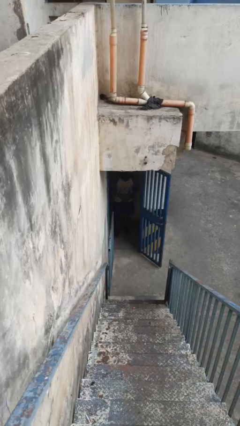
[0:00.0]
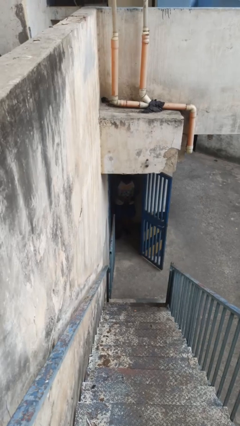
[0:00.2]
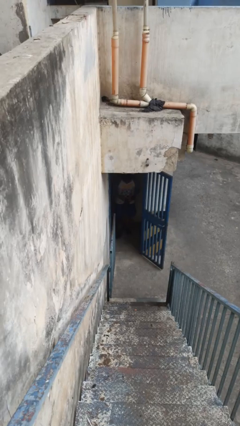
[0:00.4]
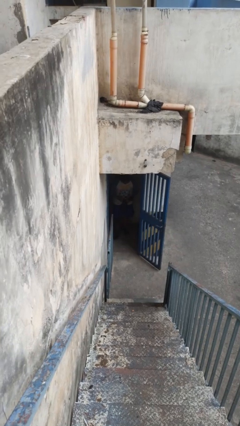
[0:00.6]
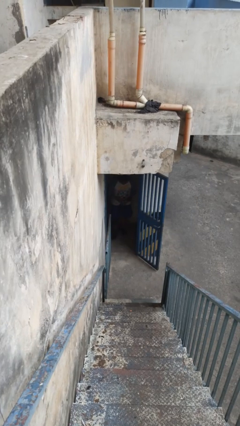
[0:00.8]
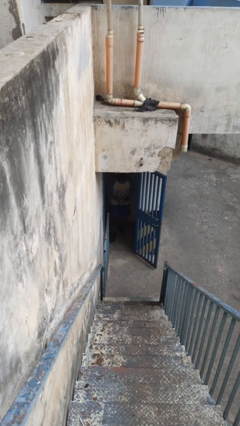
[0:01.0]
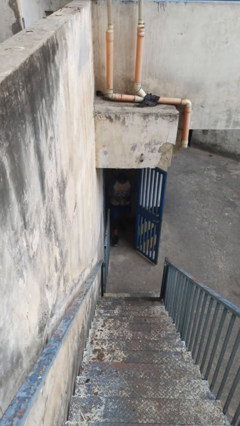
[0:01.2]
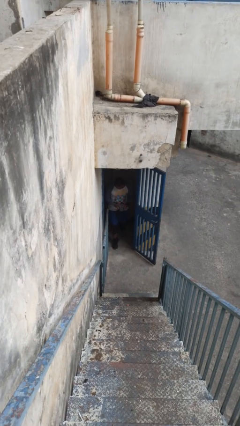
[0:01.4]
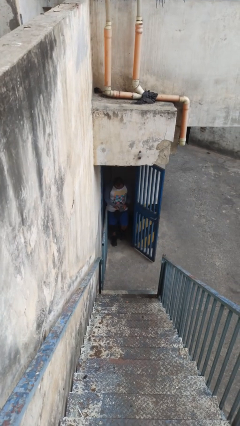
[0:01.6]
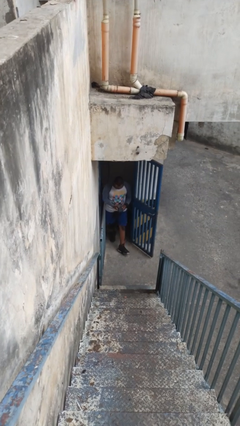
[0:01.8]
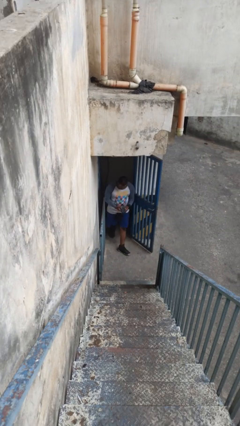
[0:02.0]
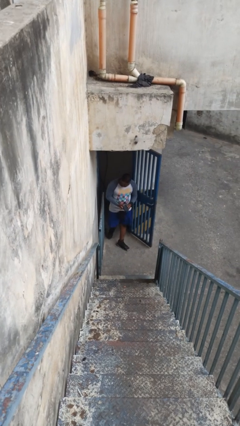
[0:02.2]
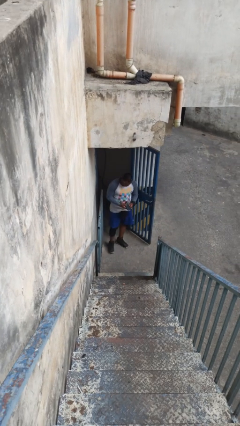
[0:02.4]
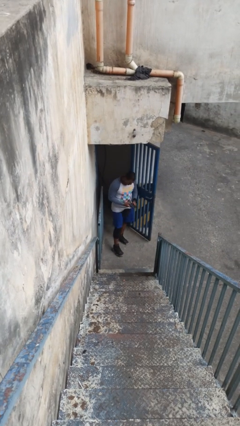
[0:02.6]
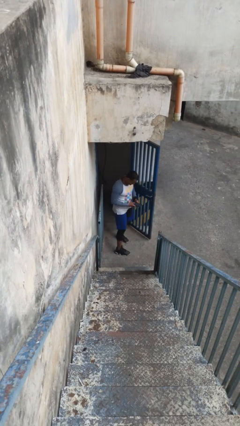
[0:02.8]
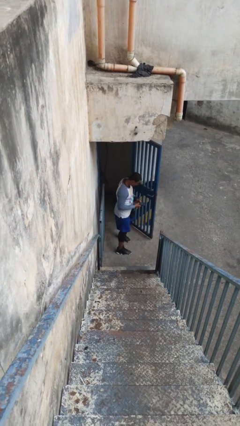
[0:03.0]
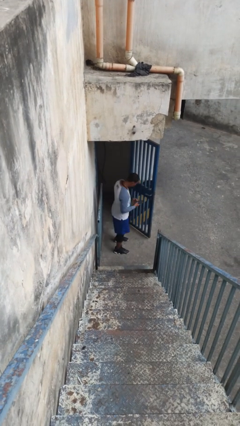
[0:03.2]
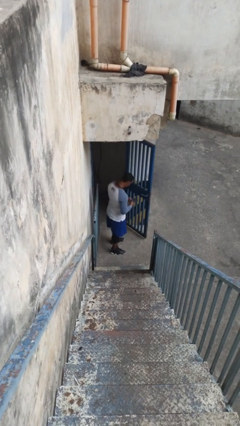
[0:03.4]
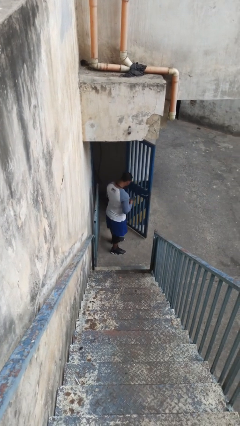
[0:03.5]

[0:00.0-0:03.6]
person enters scene through structure

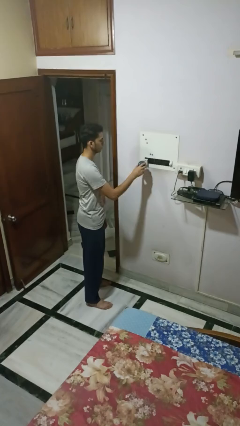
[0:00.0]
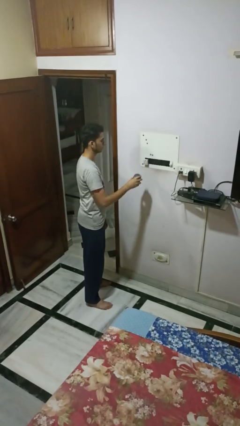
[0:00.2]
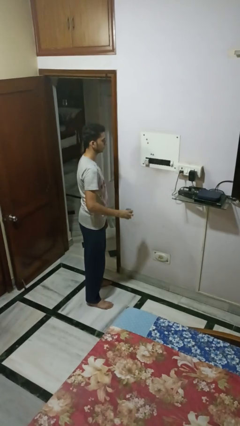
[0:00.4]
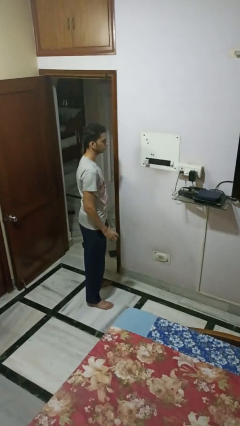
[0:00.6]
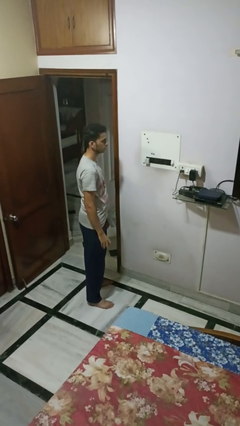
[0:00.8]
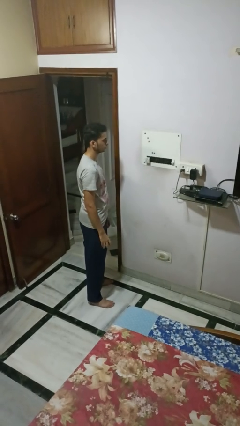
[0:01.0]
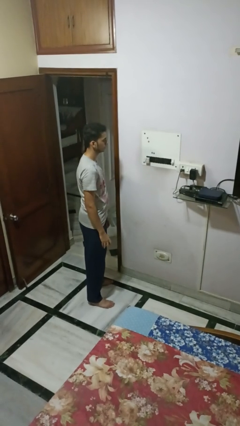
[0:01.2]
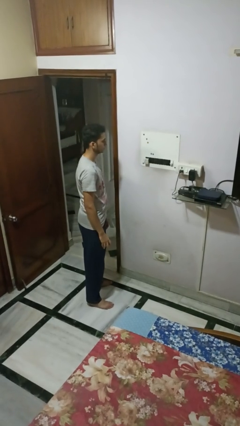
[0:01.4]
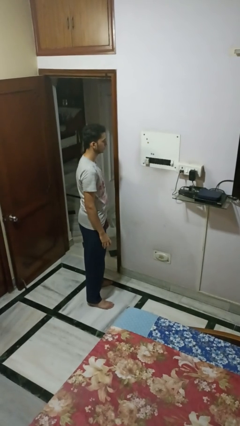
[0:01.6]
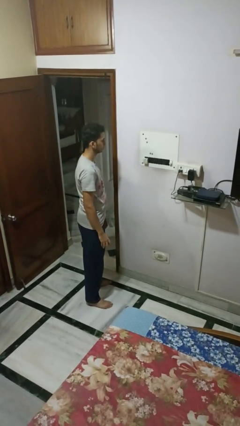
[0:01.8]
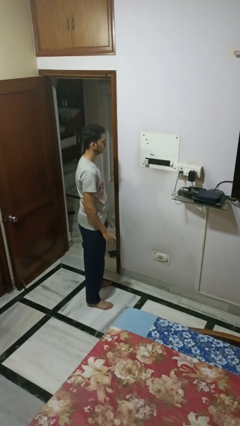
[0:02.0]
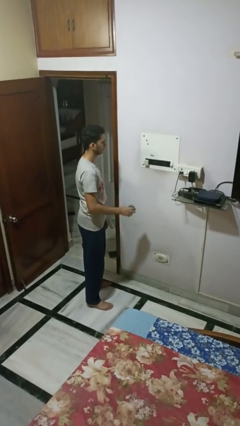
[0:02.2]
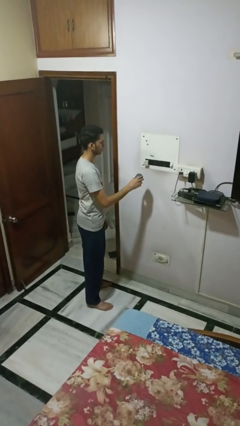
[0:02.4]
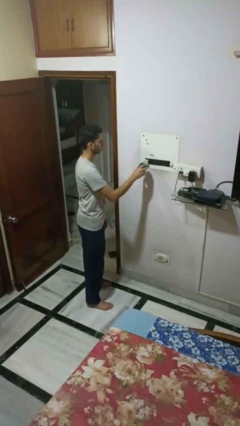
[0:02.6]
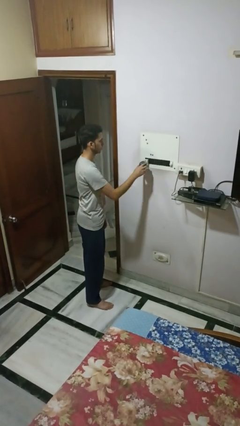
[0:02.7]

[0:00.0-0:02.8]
person unplugs from electrical socket

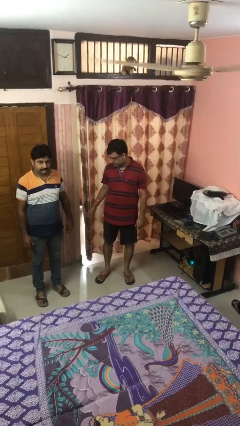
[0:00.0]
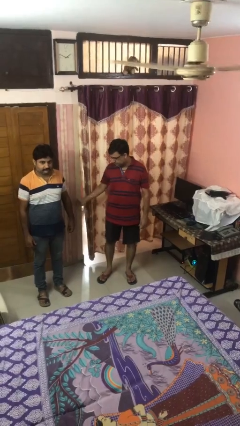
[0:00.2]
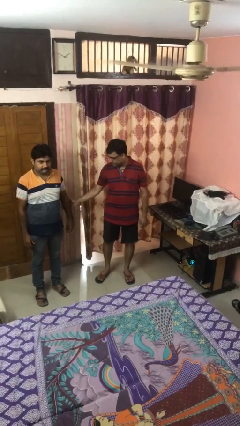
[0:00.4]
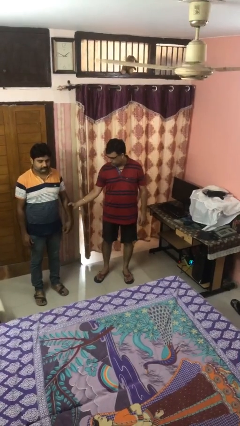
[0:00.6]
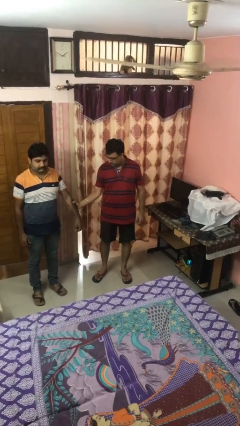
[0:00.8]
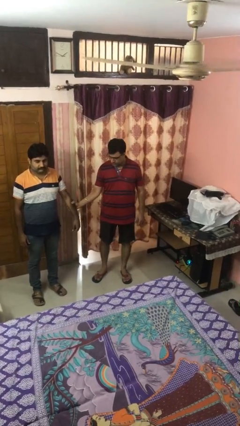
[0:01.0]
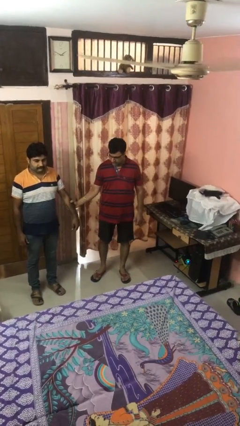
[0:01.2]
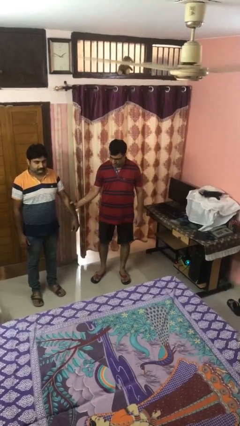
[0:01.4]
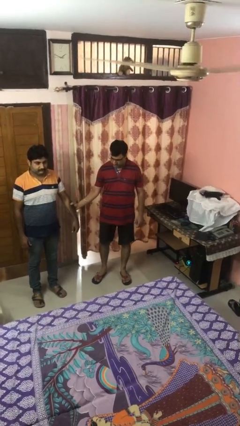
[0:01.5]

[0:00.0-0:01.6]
person grabs person by forearm

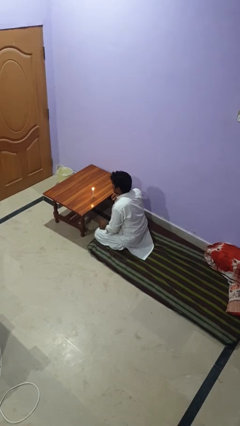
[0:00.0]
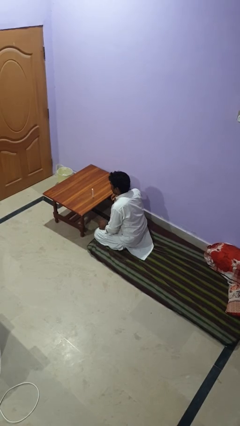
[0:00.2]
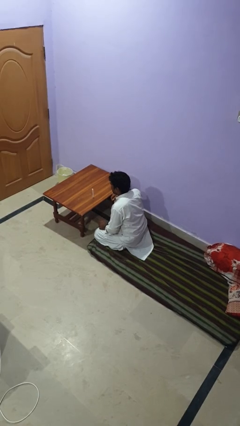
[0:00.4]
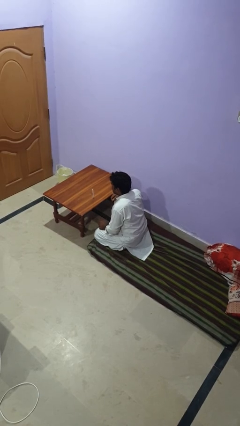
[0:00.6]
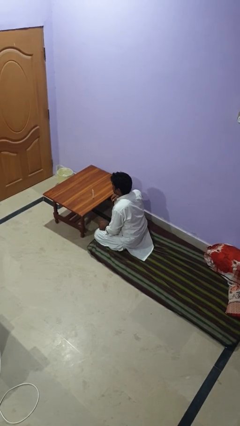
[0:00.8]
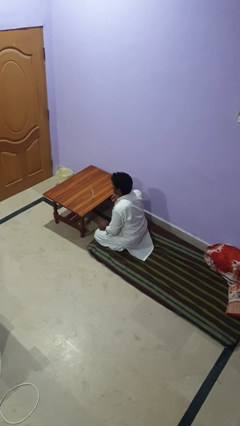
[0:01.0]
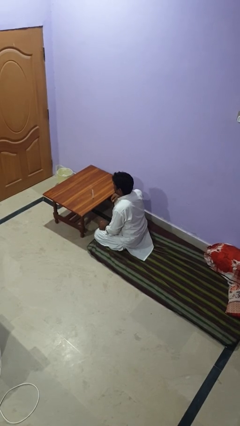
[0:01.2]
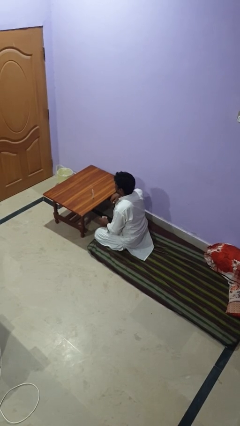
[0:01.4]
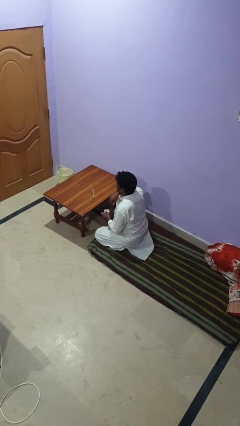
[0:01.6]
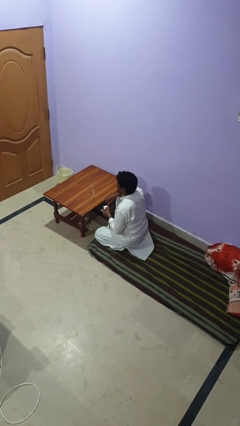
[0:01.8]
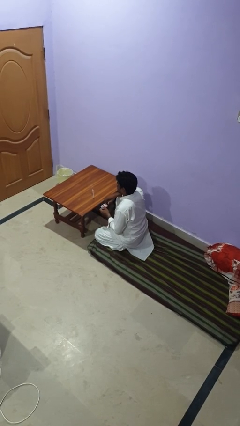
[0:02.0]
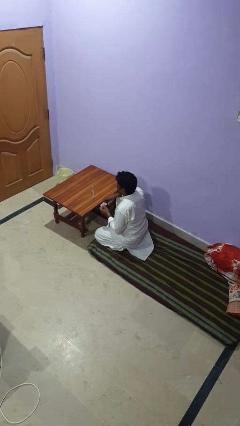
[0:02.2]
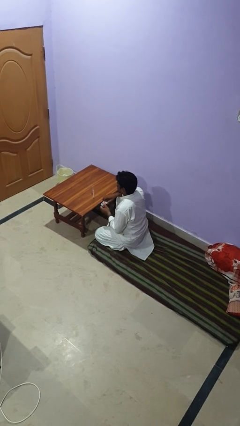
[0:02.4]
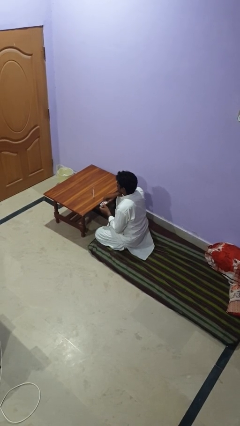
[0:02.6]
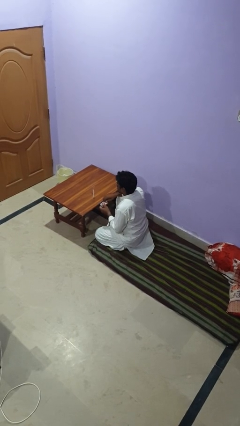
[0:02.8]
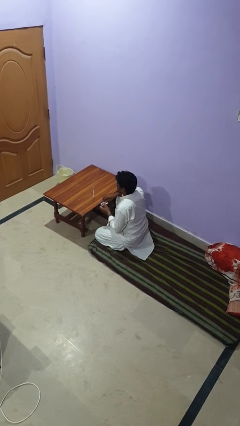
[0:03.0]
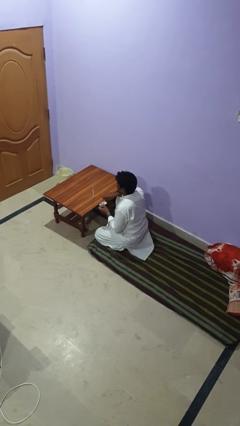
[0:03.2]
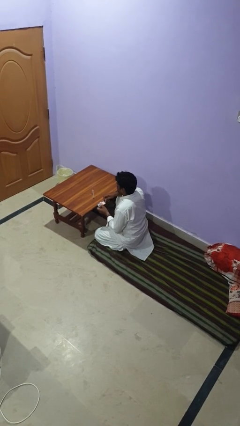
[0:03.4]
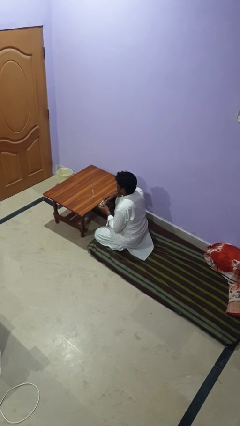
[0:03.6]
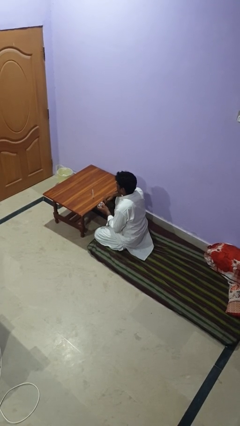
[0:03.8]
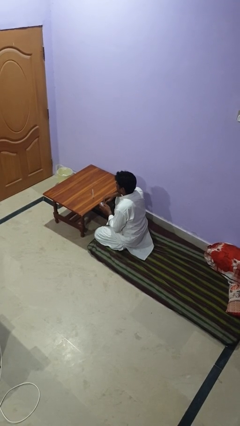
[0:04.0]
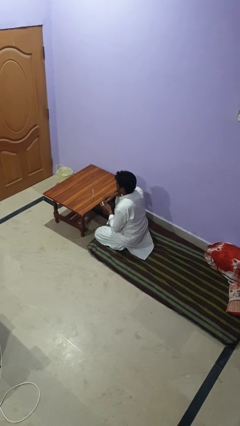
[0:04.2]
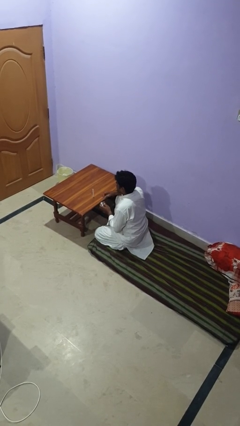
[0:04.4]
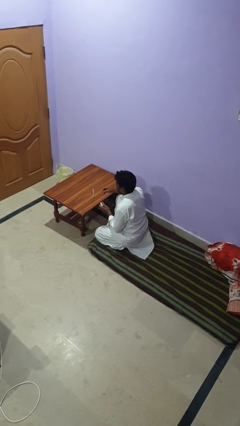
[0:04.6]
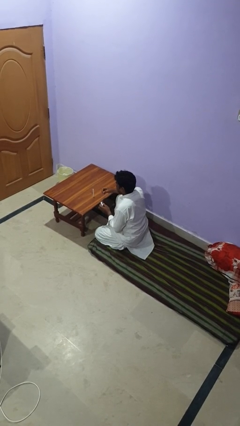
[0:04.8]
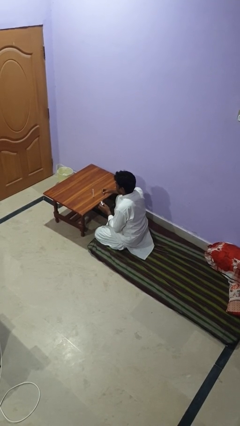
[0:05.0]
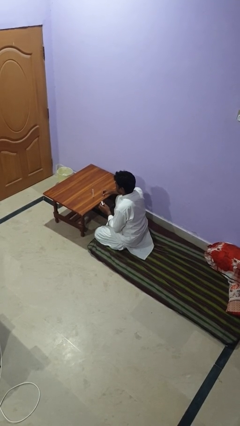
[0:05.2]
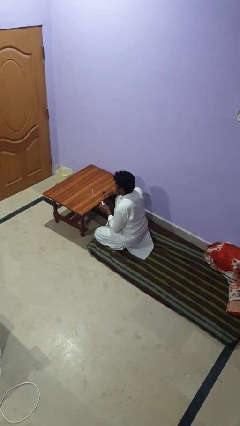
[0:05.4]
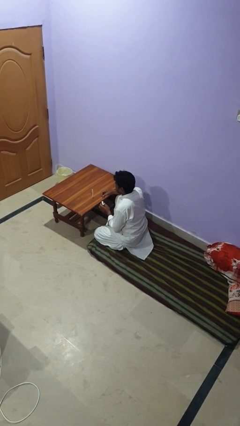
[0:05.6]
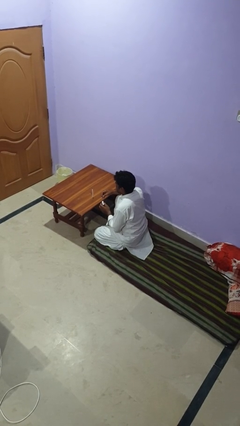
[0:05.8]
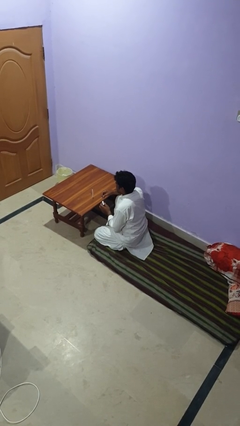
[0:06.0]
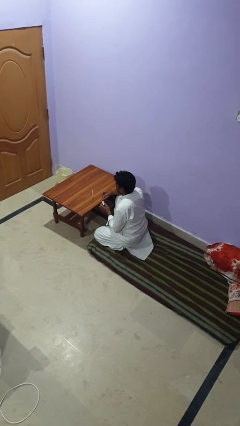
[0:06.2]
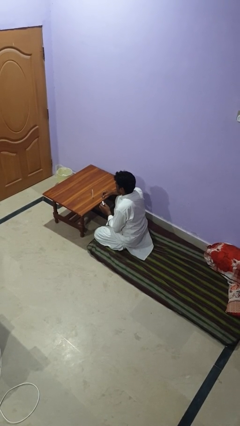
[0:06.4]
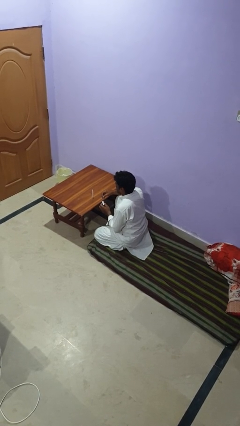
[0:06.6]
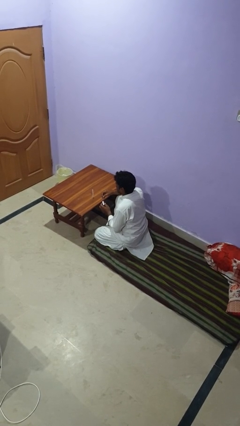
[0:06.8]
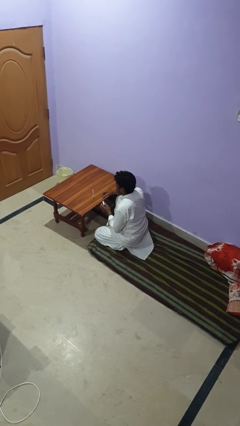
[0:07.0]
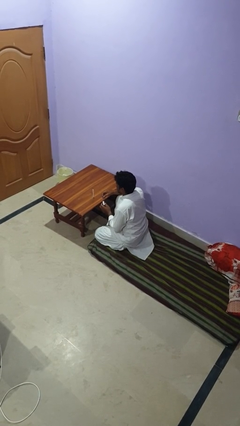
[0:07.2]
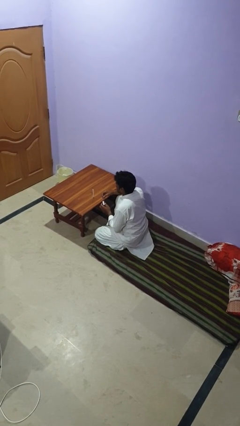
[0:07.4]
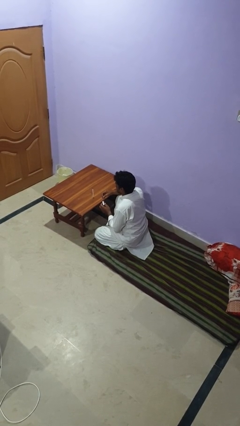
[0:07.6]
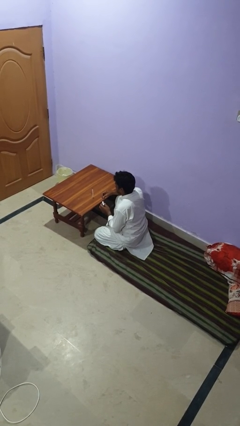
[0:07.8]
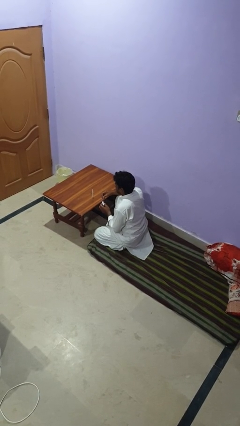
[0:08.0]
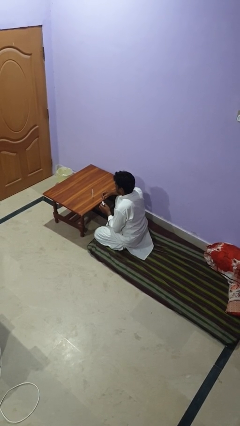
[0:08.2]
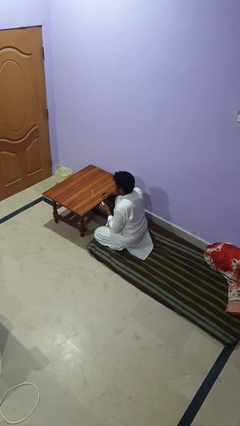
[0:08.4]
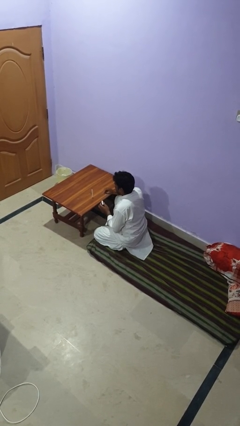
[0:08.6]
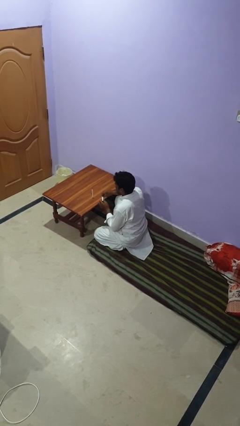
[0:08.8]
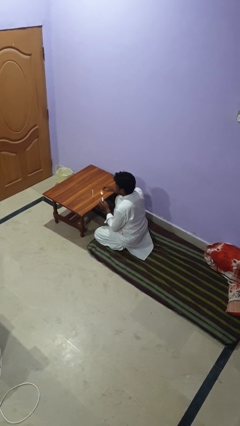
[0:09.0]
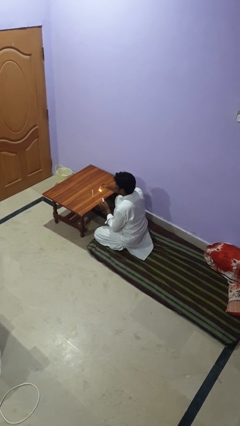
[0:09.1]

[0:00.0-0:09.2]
person extinguishes candle

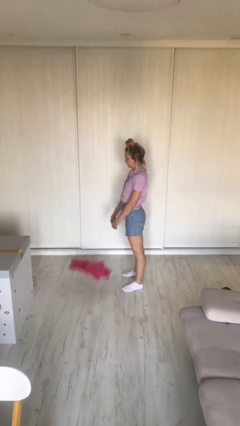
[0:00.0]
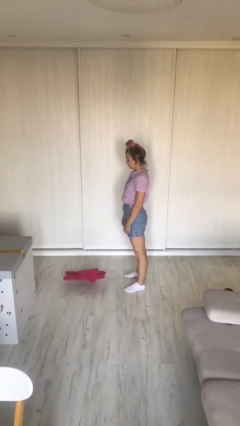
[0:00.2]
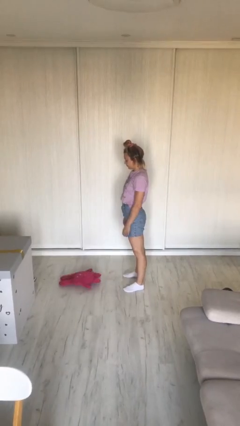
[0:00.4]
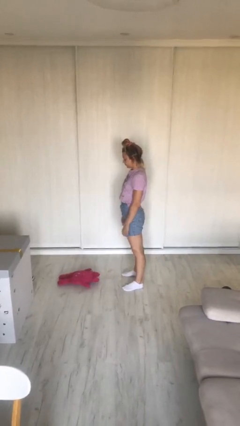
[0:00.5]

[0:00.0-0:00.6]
person drops object
